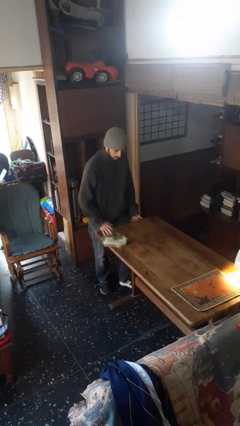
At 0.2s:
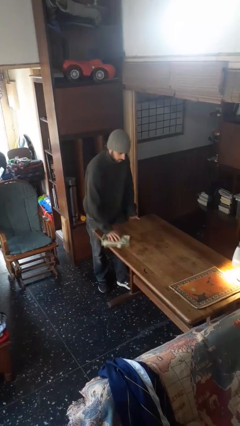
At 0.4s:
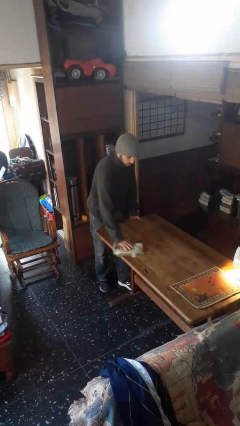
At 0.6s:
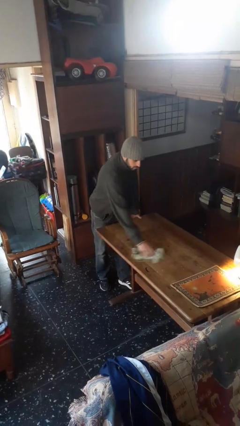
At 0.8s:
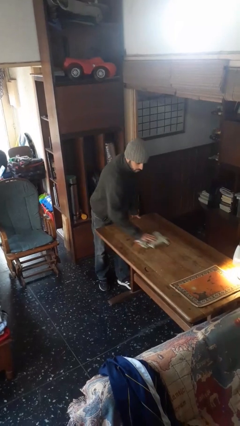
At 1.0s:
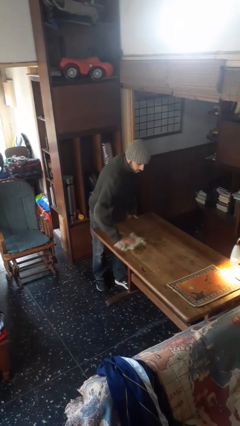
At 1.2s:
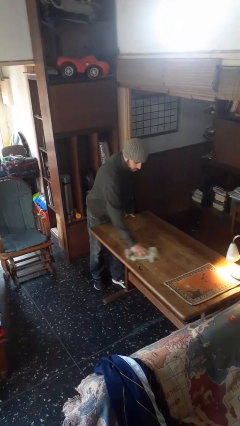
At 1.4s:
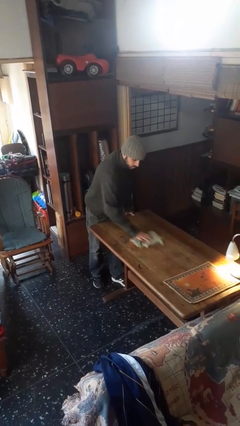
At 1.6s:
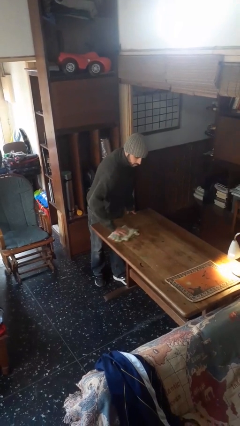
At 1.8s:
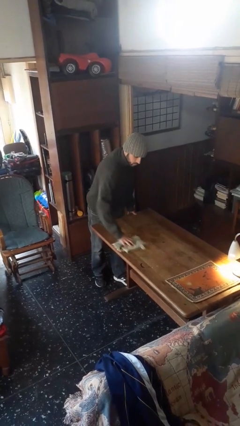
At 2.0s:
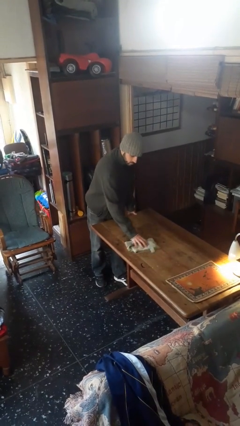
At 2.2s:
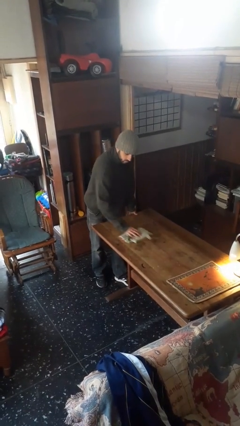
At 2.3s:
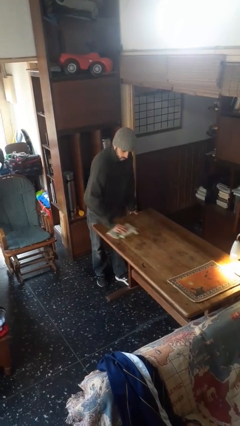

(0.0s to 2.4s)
person cleans table with rag

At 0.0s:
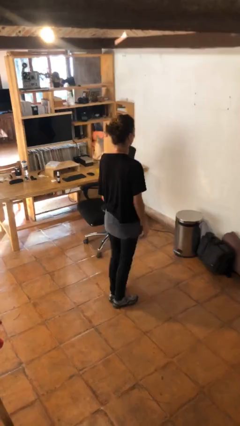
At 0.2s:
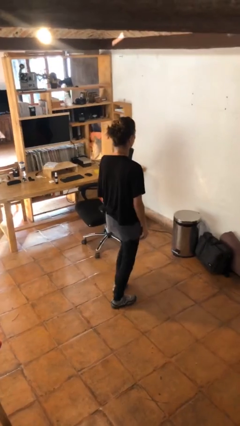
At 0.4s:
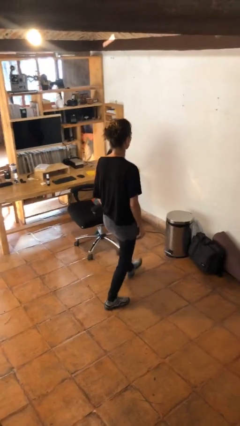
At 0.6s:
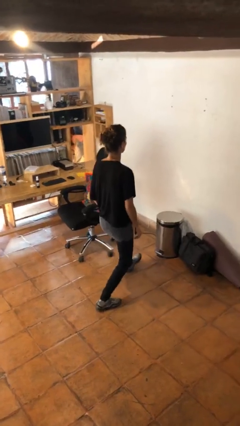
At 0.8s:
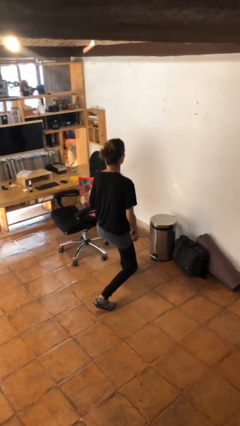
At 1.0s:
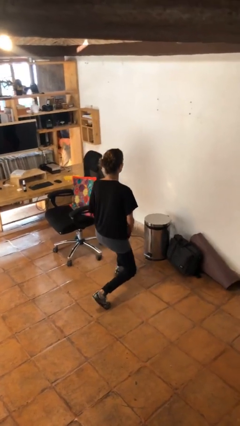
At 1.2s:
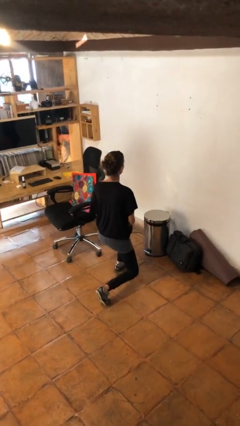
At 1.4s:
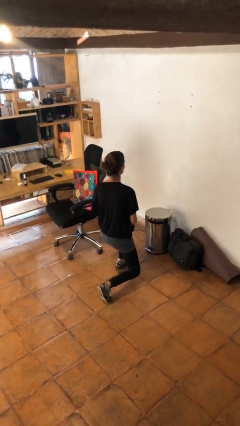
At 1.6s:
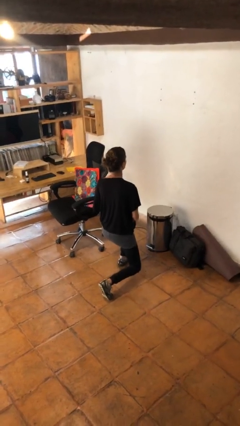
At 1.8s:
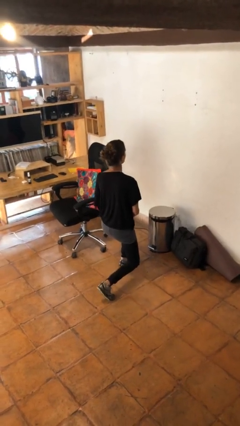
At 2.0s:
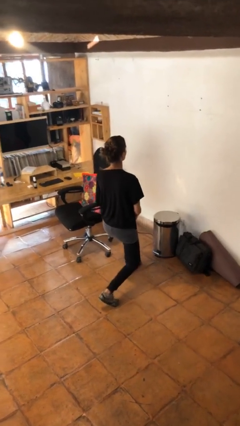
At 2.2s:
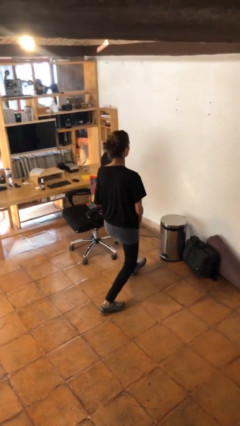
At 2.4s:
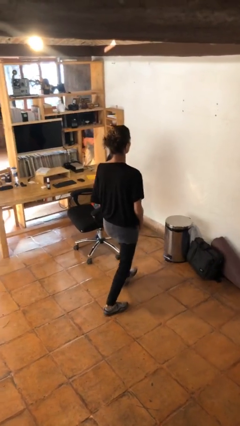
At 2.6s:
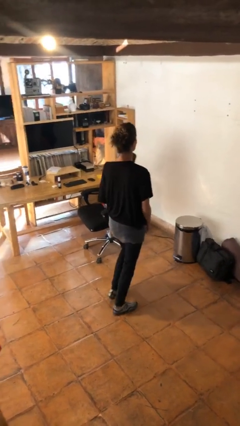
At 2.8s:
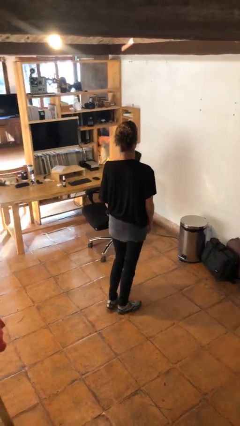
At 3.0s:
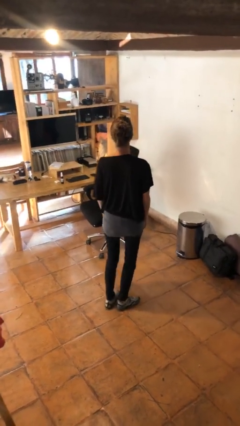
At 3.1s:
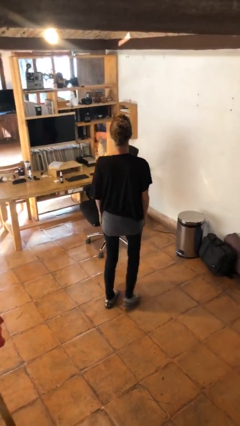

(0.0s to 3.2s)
person exercises with lunges

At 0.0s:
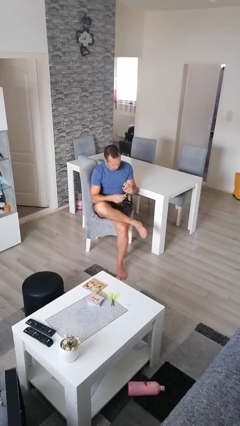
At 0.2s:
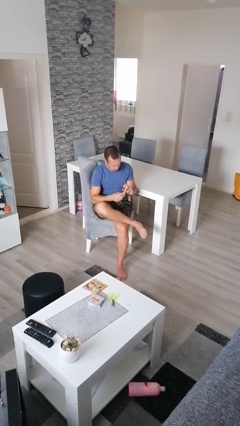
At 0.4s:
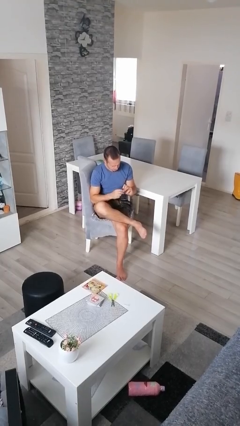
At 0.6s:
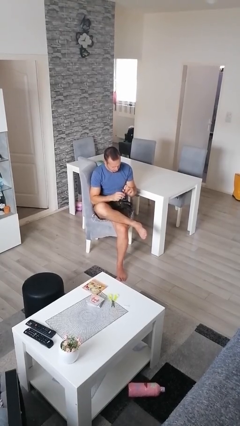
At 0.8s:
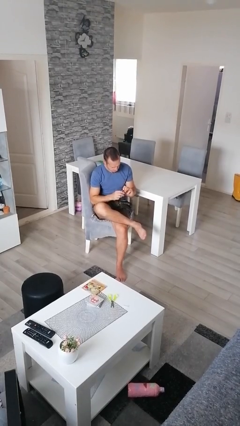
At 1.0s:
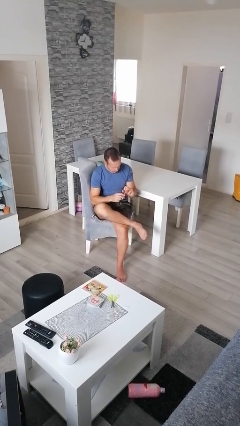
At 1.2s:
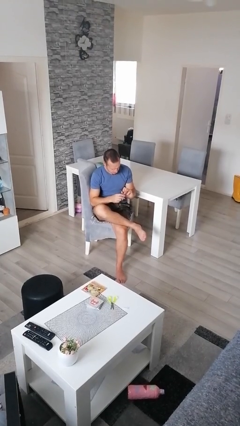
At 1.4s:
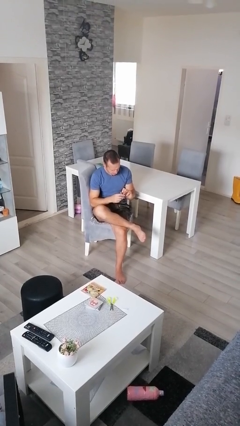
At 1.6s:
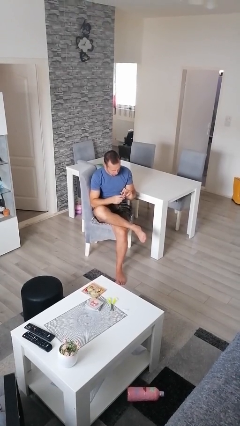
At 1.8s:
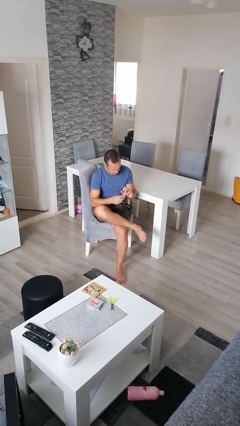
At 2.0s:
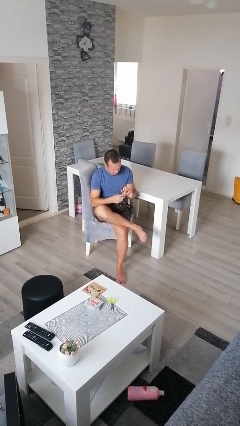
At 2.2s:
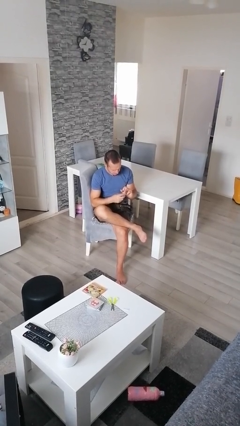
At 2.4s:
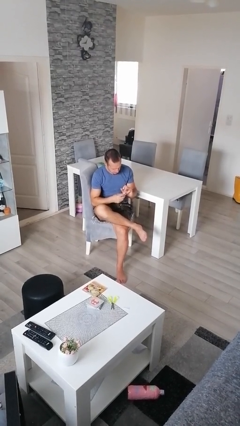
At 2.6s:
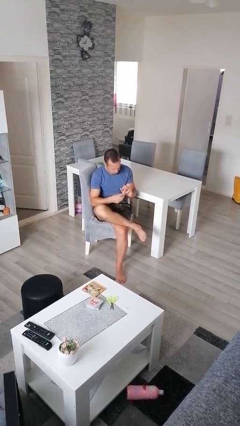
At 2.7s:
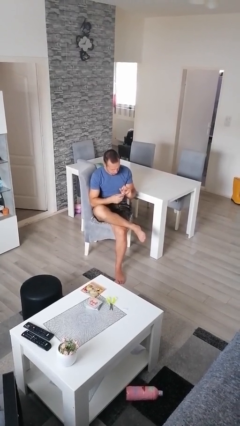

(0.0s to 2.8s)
person files fingernails

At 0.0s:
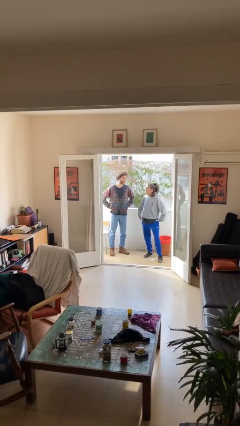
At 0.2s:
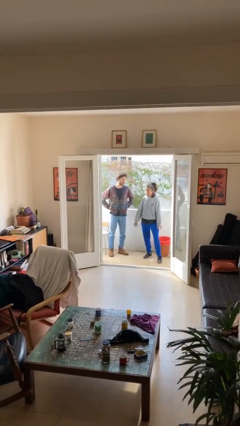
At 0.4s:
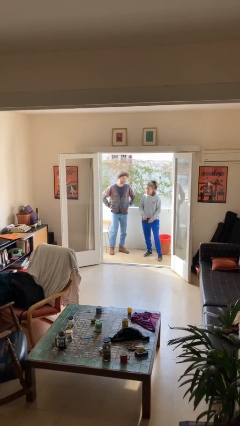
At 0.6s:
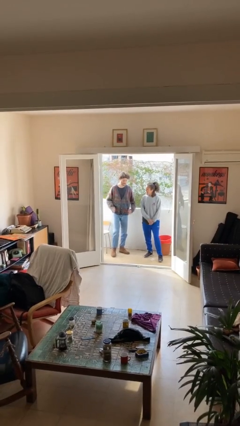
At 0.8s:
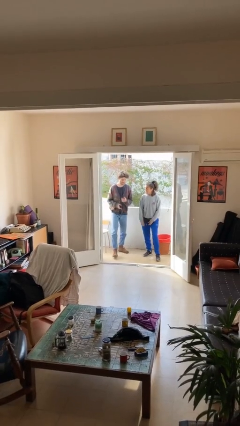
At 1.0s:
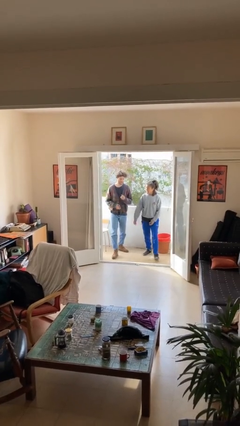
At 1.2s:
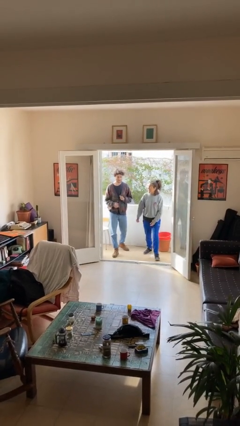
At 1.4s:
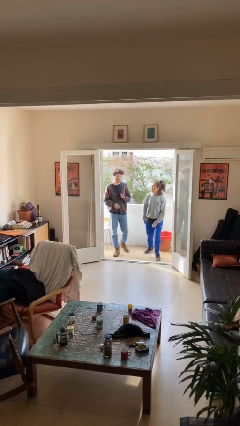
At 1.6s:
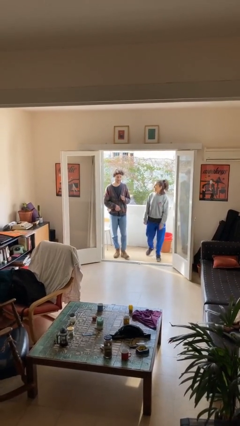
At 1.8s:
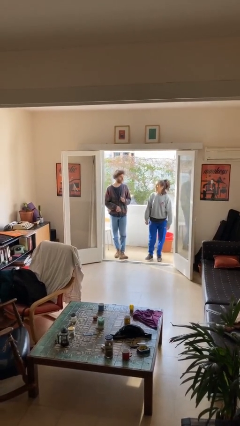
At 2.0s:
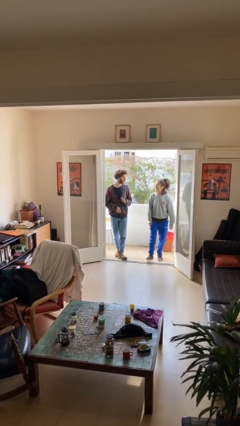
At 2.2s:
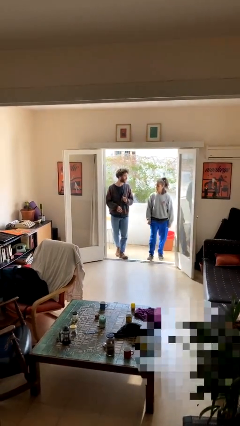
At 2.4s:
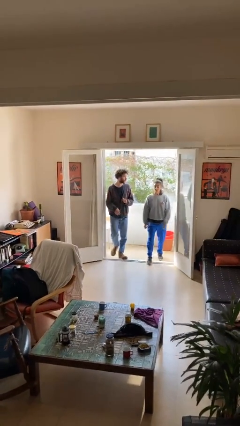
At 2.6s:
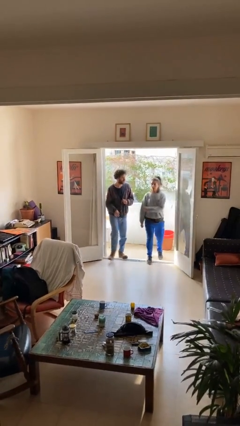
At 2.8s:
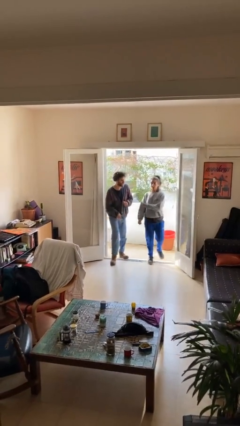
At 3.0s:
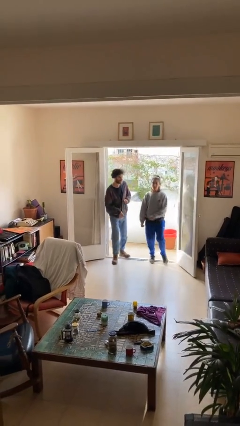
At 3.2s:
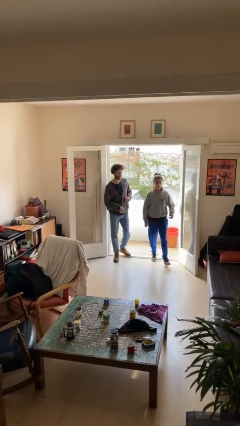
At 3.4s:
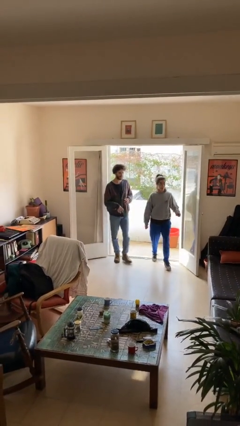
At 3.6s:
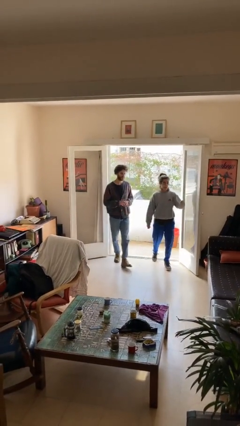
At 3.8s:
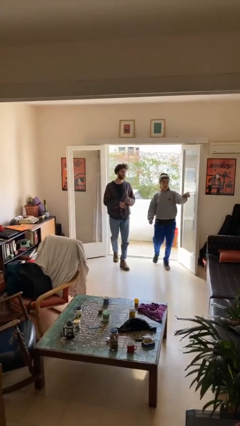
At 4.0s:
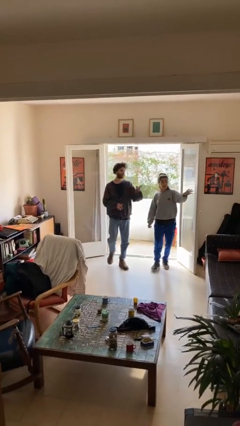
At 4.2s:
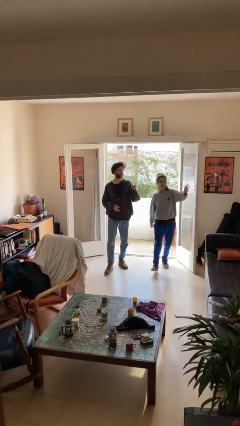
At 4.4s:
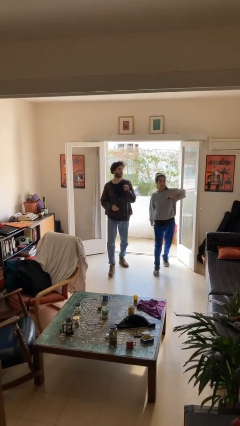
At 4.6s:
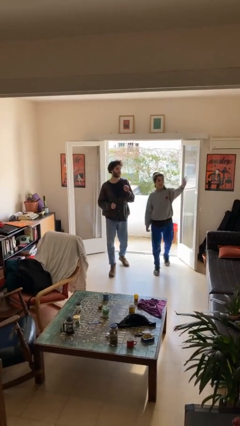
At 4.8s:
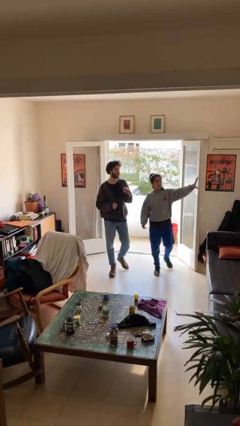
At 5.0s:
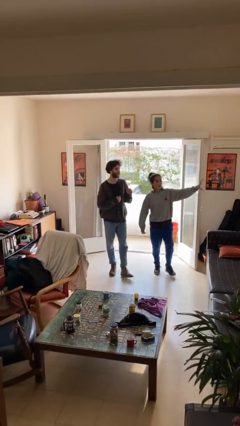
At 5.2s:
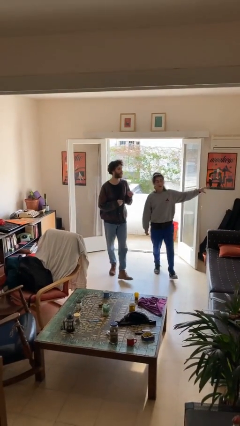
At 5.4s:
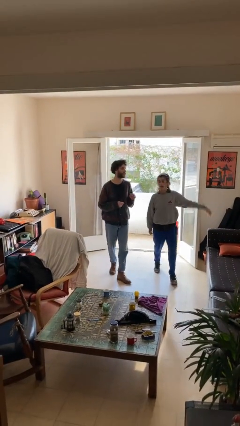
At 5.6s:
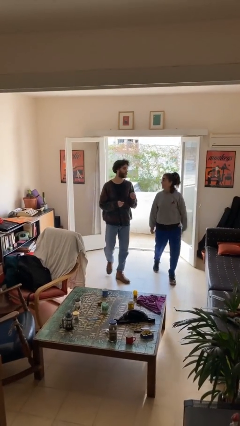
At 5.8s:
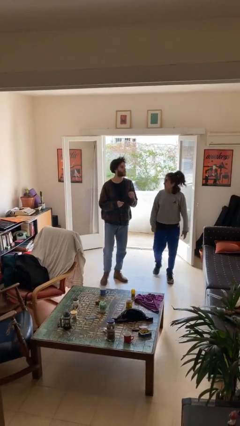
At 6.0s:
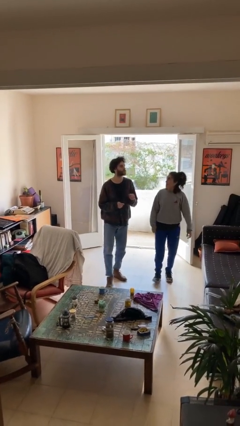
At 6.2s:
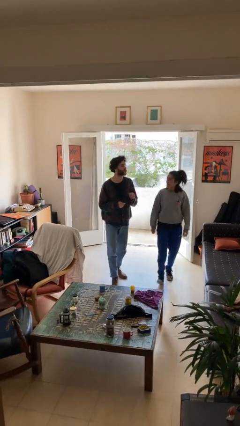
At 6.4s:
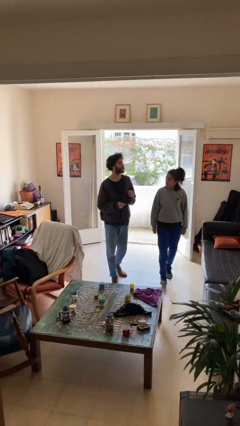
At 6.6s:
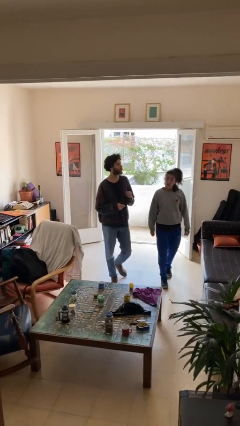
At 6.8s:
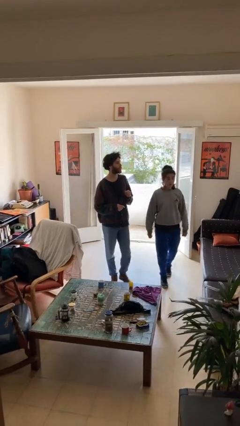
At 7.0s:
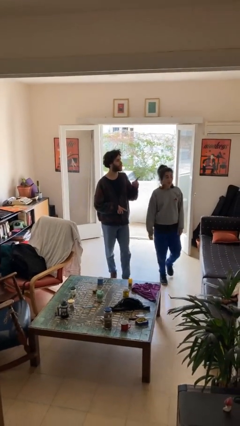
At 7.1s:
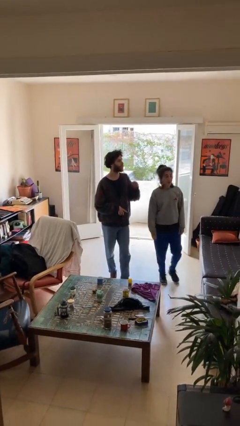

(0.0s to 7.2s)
person talks to person

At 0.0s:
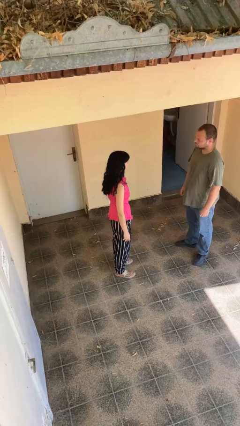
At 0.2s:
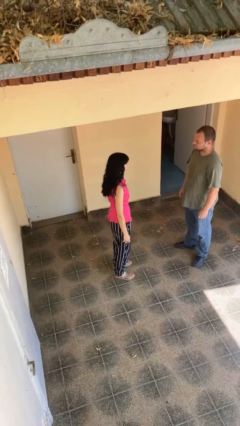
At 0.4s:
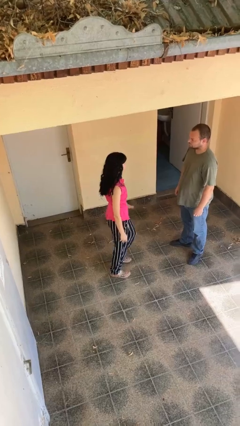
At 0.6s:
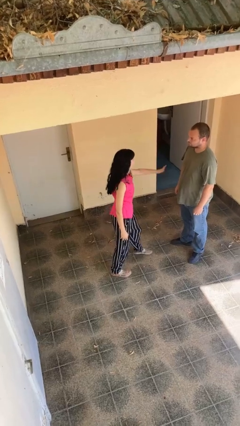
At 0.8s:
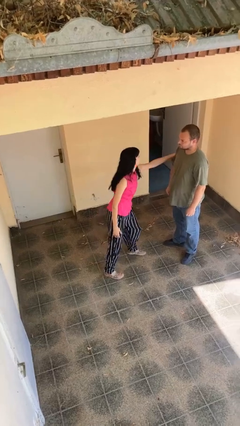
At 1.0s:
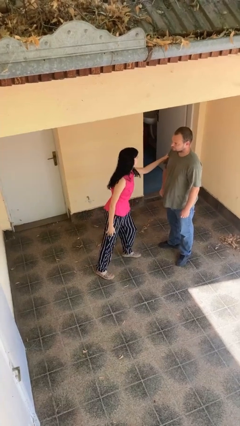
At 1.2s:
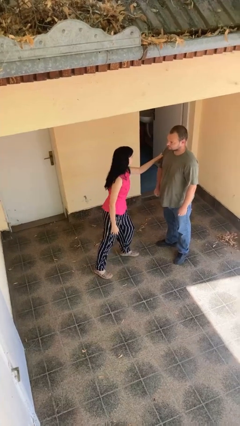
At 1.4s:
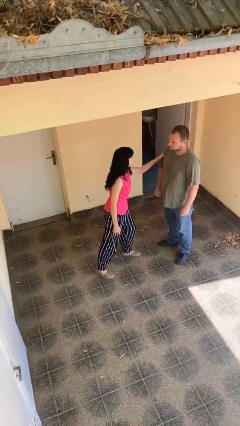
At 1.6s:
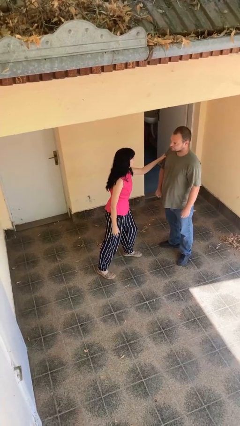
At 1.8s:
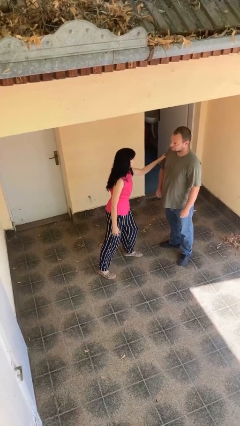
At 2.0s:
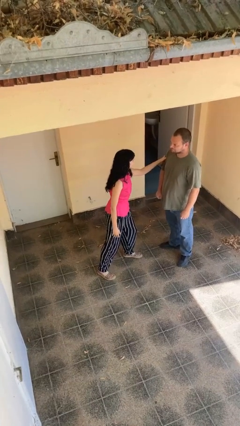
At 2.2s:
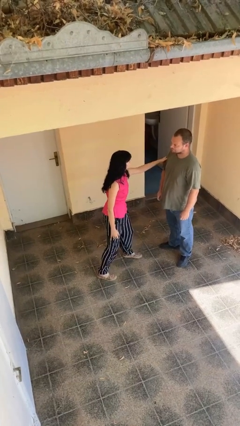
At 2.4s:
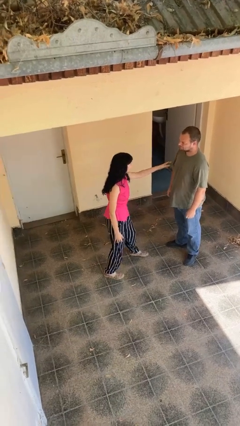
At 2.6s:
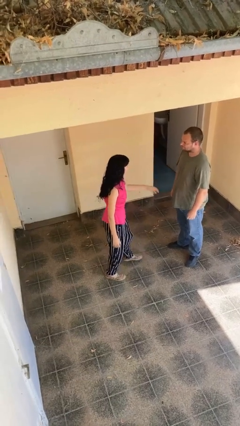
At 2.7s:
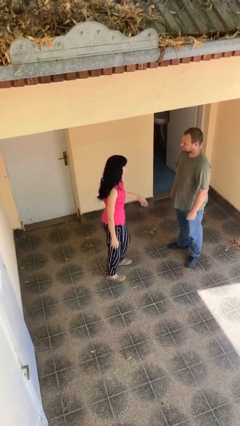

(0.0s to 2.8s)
person grabs person by bicep
